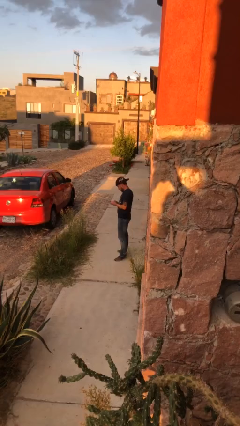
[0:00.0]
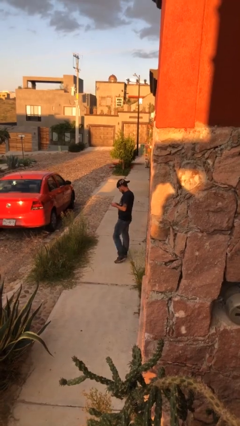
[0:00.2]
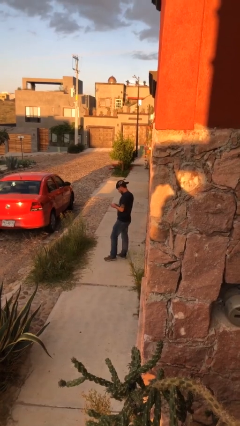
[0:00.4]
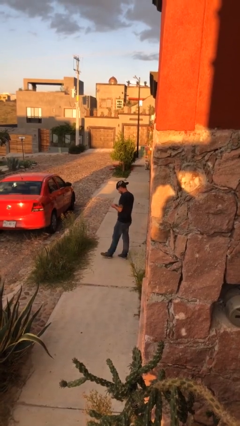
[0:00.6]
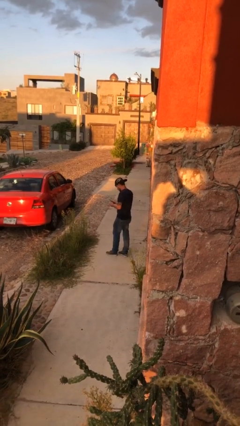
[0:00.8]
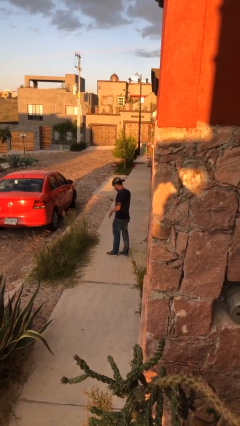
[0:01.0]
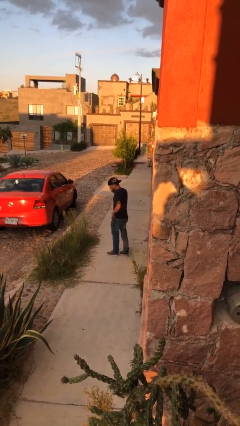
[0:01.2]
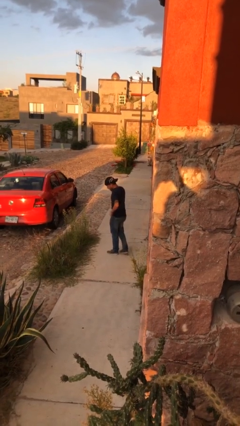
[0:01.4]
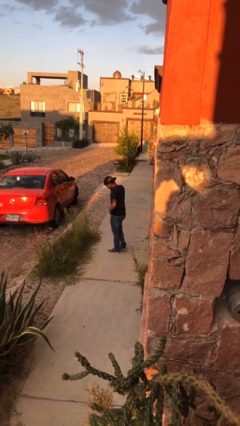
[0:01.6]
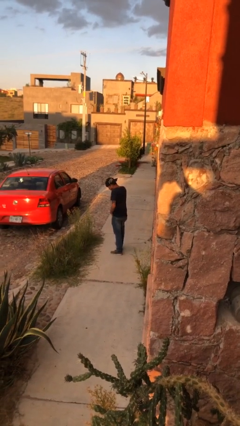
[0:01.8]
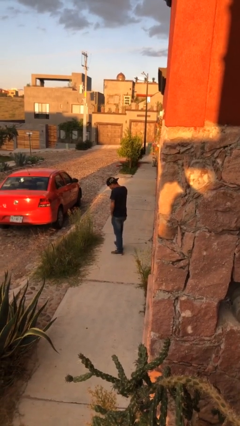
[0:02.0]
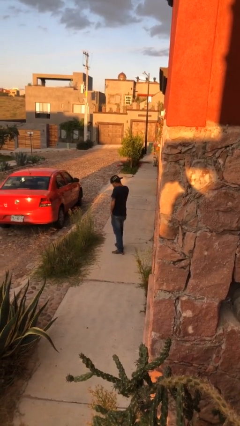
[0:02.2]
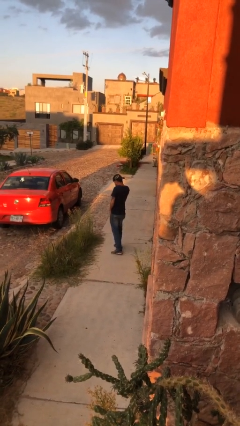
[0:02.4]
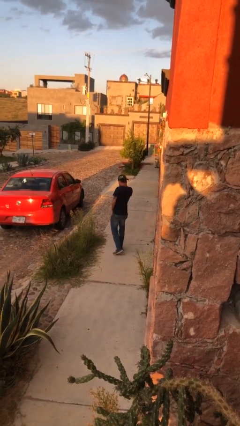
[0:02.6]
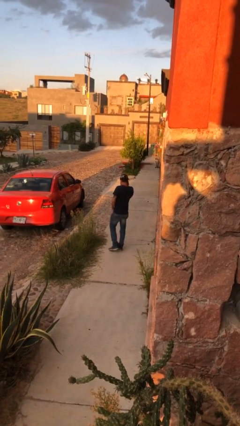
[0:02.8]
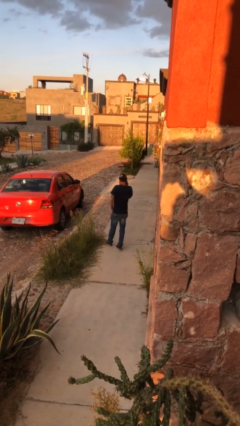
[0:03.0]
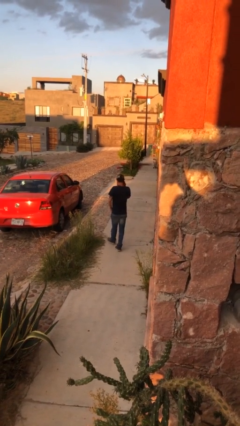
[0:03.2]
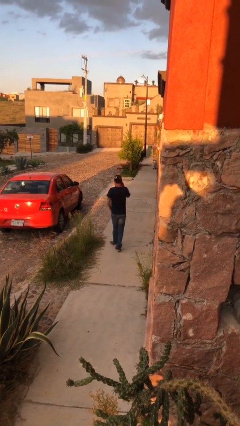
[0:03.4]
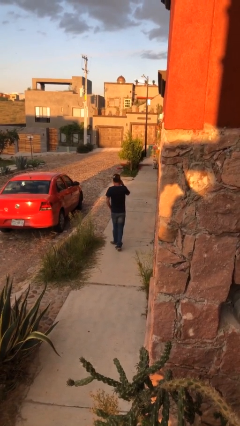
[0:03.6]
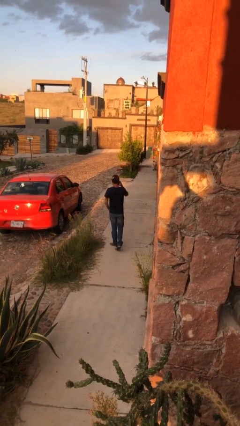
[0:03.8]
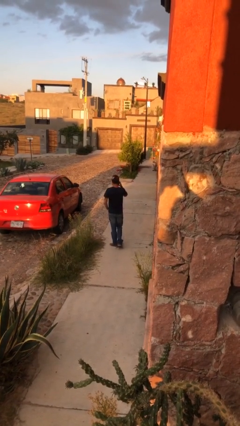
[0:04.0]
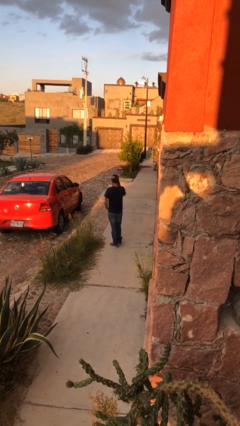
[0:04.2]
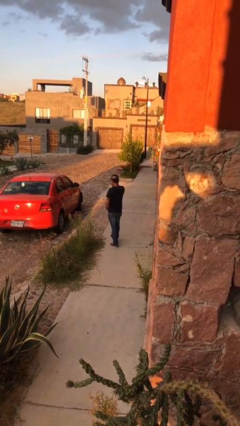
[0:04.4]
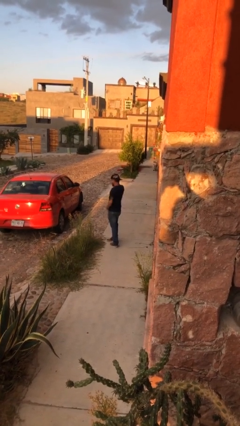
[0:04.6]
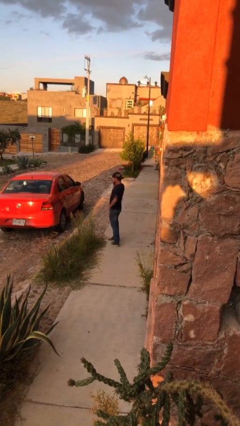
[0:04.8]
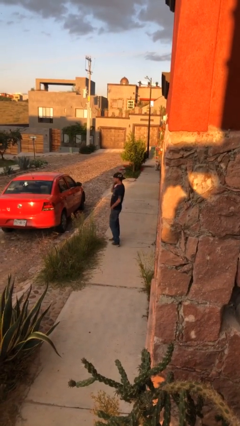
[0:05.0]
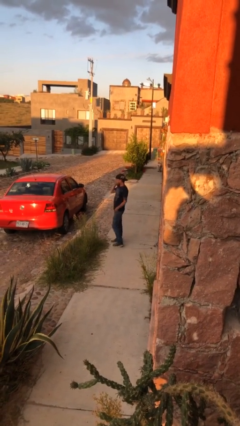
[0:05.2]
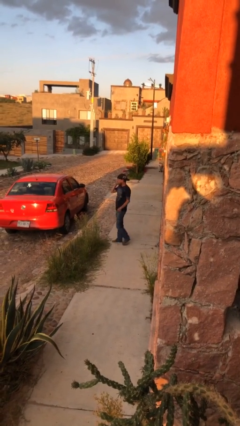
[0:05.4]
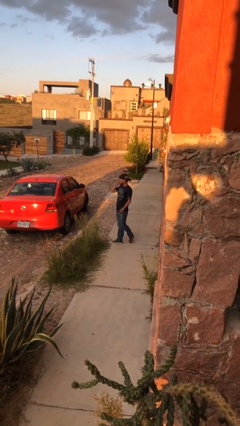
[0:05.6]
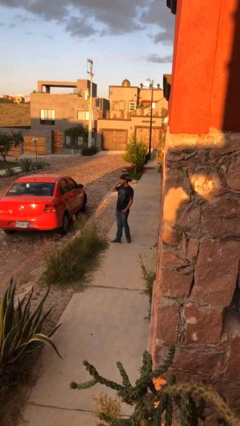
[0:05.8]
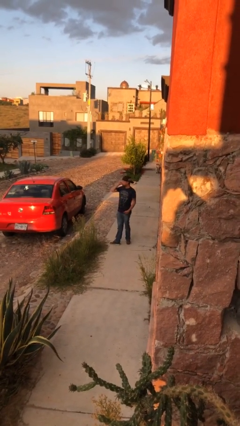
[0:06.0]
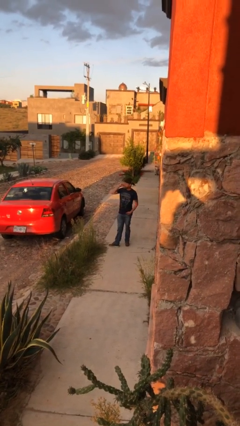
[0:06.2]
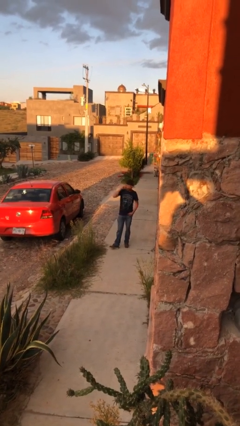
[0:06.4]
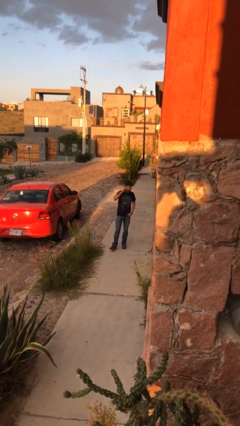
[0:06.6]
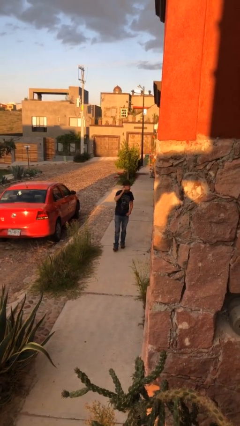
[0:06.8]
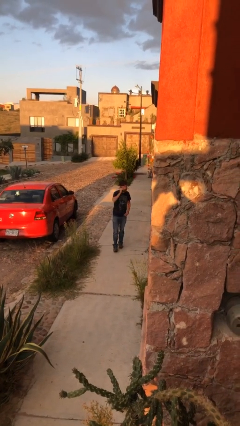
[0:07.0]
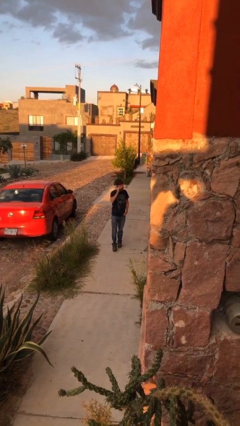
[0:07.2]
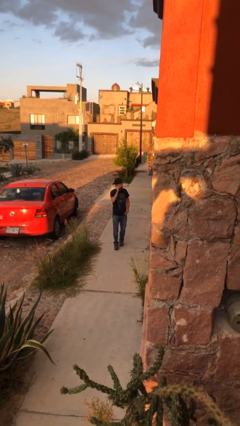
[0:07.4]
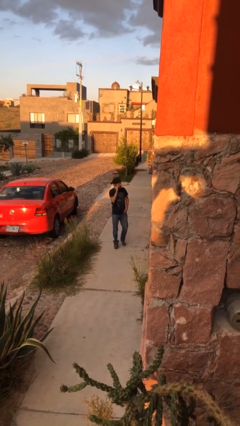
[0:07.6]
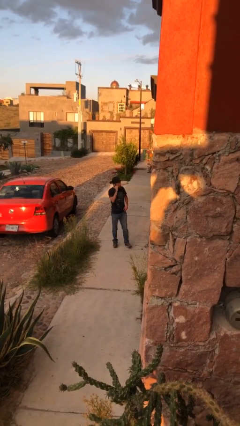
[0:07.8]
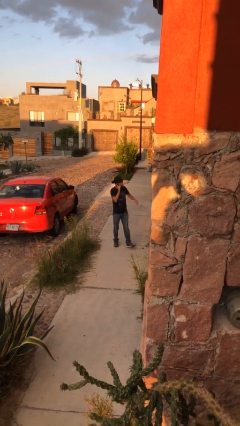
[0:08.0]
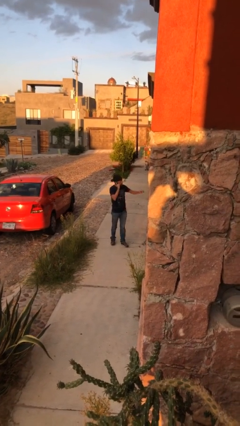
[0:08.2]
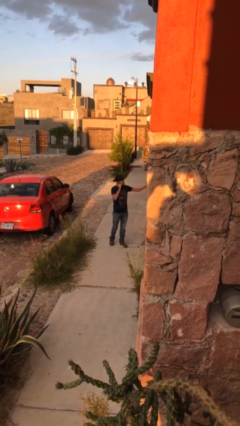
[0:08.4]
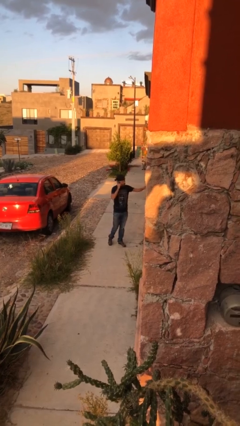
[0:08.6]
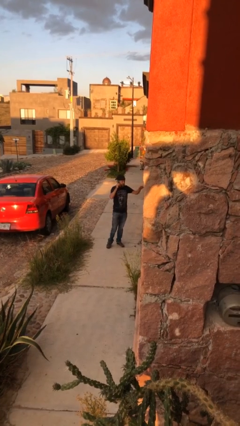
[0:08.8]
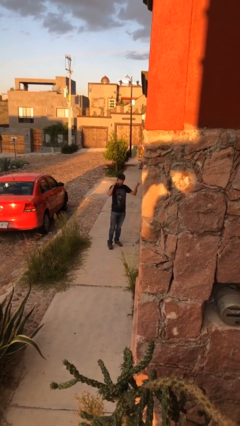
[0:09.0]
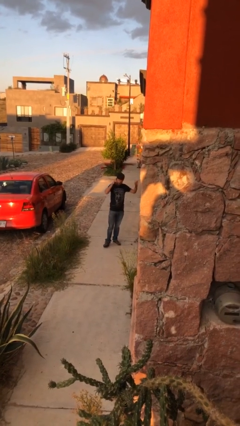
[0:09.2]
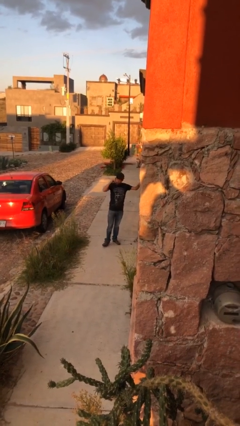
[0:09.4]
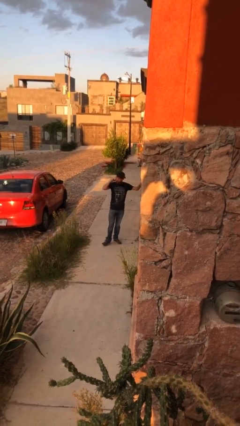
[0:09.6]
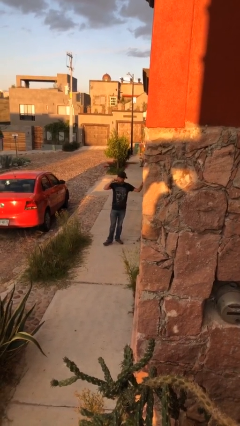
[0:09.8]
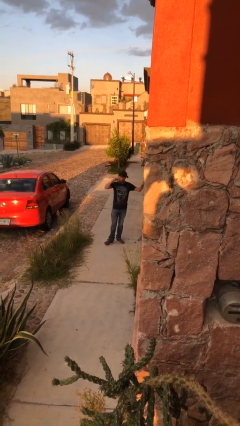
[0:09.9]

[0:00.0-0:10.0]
person talks on phone

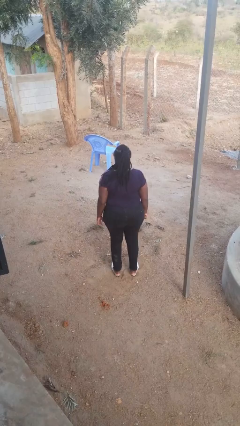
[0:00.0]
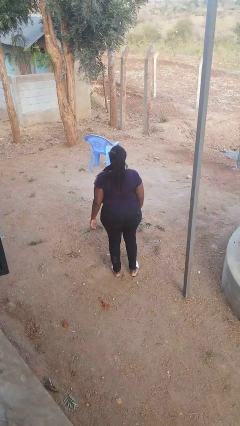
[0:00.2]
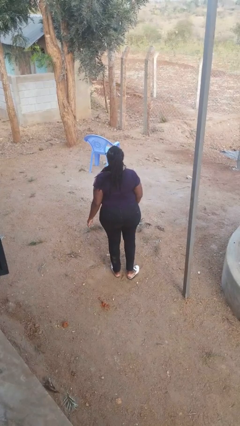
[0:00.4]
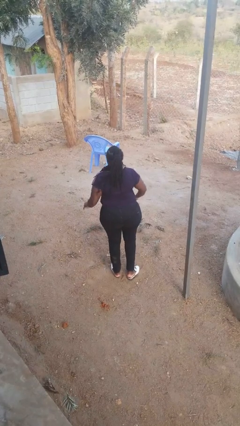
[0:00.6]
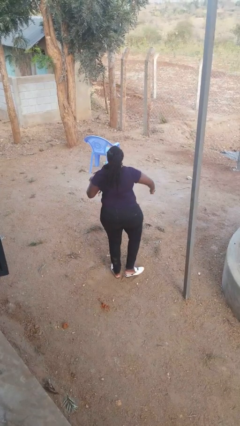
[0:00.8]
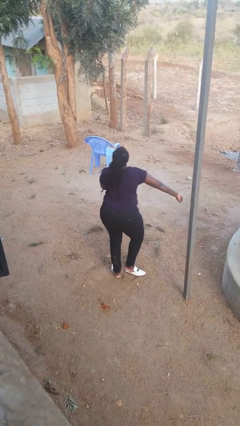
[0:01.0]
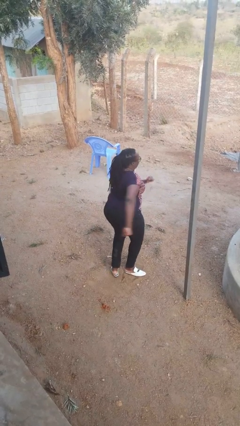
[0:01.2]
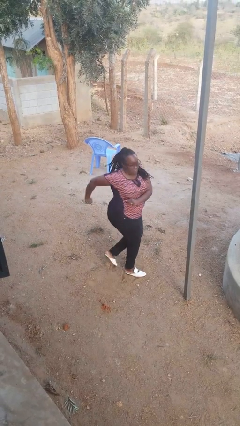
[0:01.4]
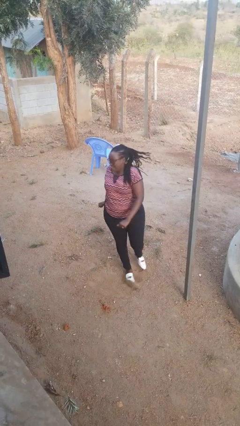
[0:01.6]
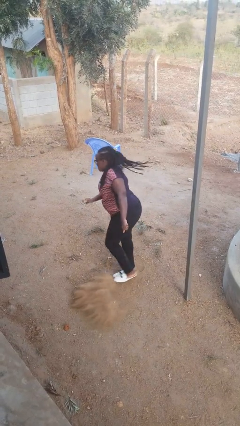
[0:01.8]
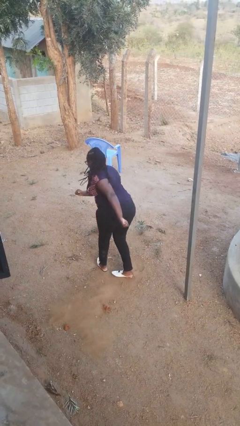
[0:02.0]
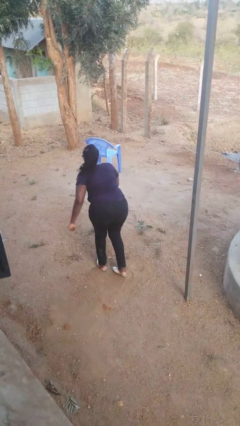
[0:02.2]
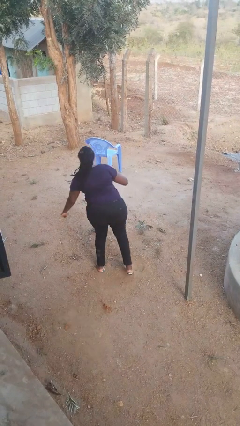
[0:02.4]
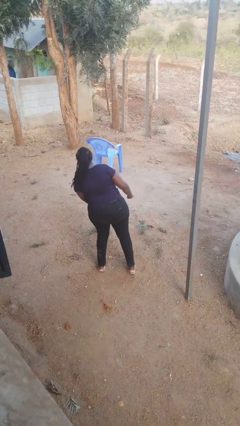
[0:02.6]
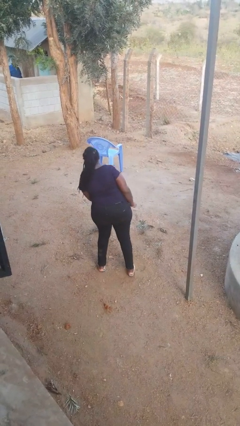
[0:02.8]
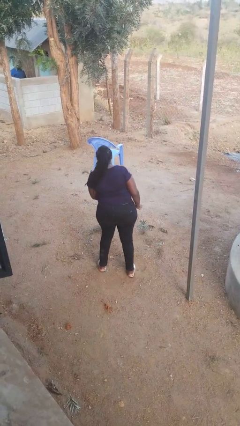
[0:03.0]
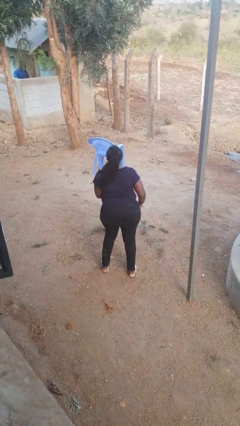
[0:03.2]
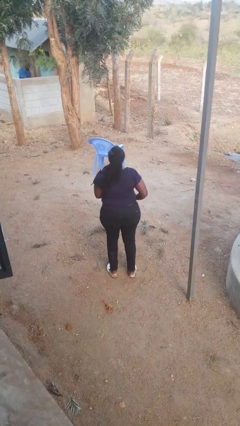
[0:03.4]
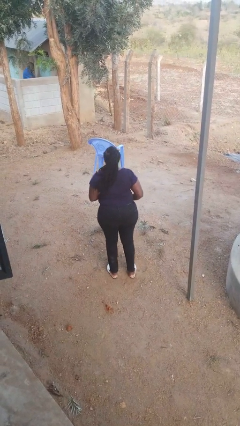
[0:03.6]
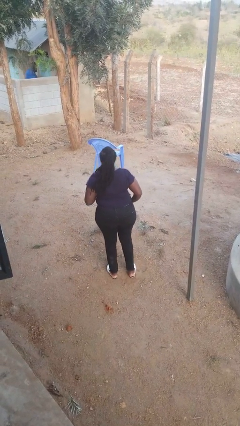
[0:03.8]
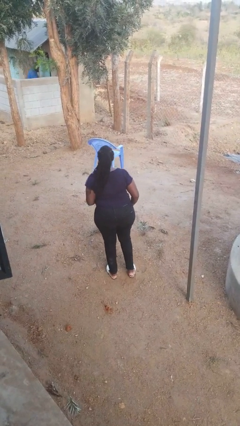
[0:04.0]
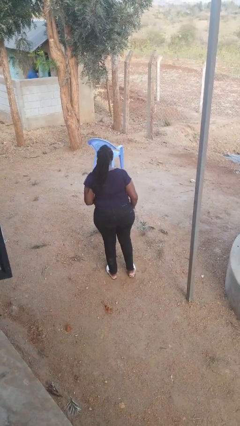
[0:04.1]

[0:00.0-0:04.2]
person twirls

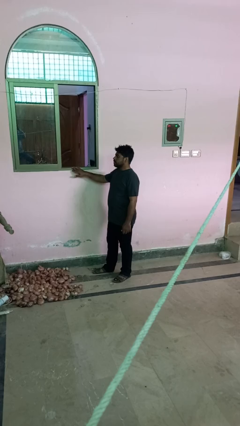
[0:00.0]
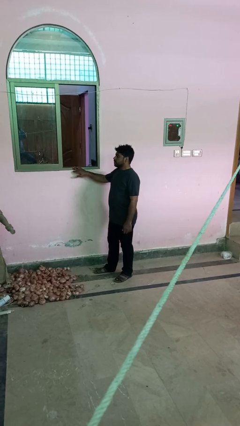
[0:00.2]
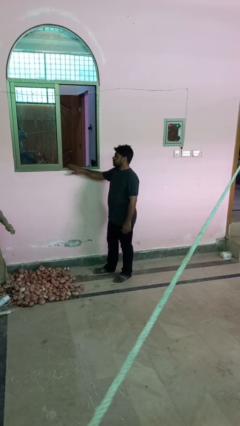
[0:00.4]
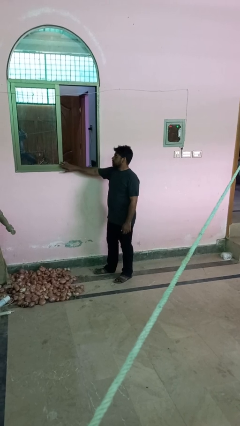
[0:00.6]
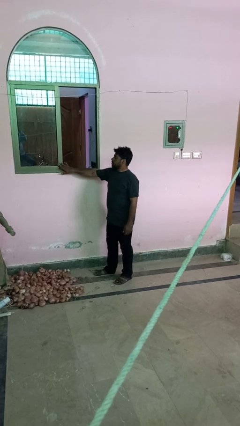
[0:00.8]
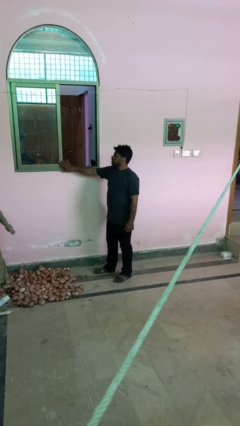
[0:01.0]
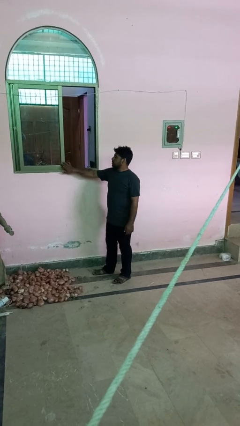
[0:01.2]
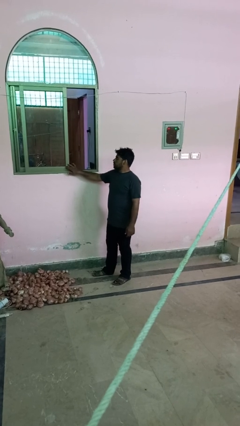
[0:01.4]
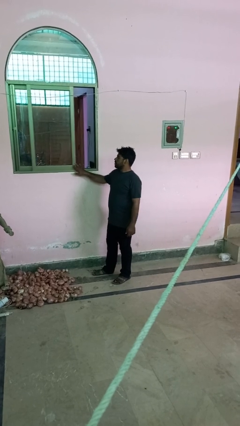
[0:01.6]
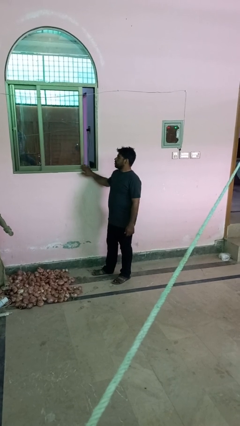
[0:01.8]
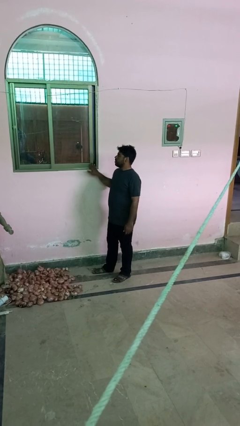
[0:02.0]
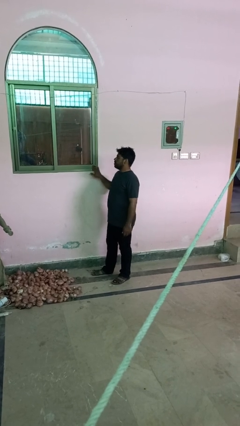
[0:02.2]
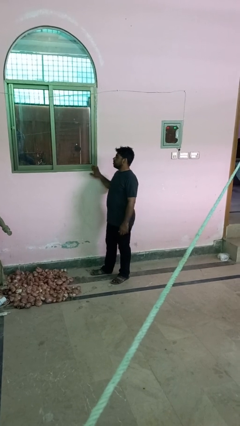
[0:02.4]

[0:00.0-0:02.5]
person closes sliding door

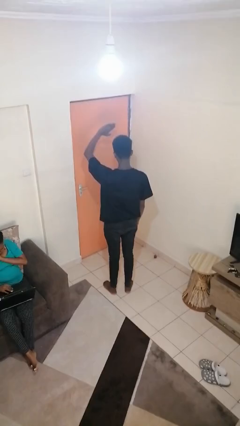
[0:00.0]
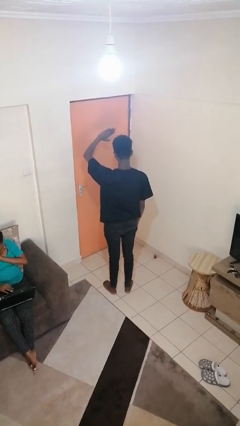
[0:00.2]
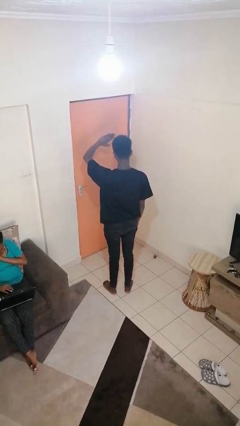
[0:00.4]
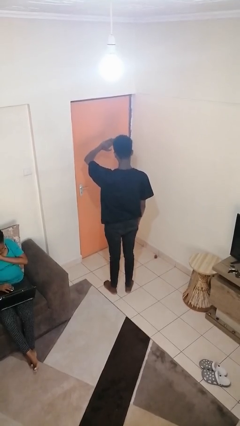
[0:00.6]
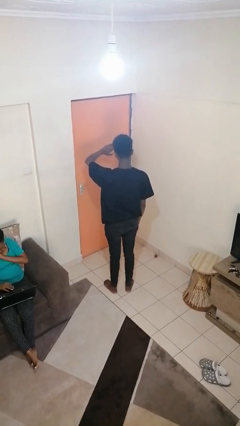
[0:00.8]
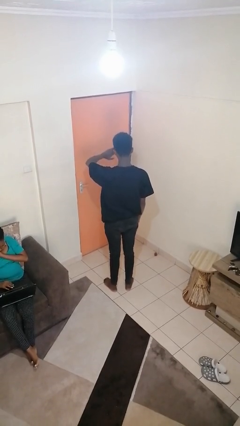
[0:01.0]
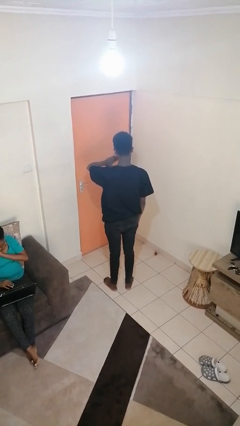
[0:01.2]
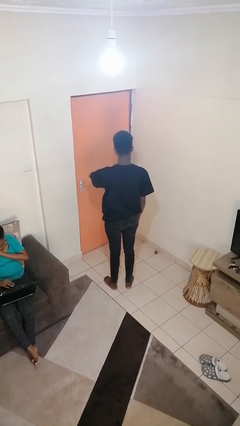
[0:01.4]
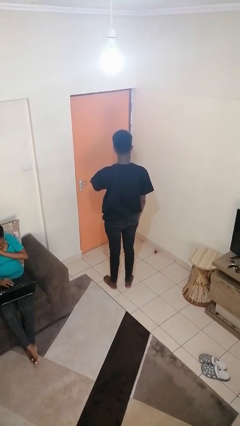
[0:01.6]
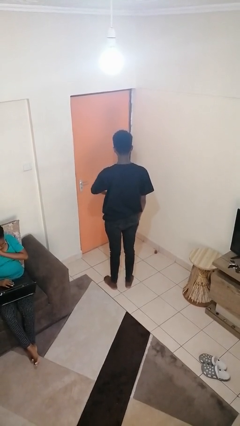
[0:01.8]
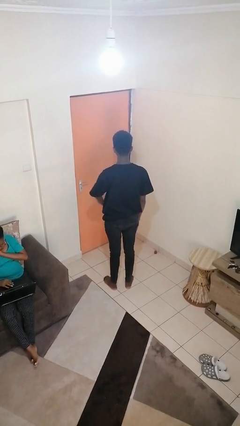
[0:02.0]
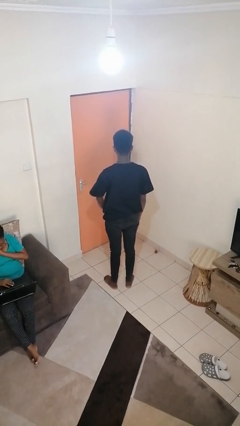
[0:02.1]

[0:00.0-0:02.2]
person gestures swipe down
